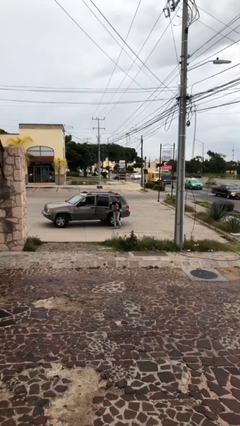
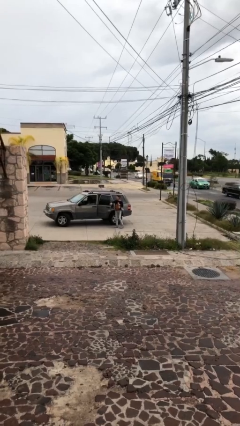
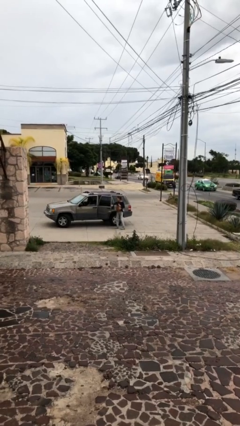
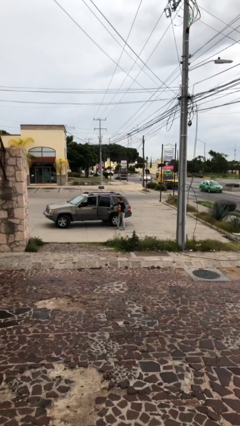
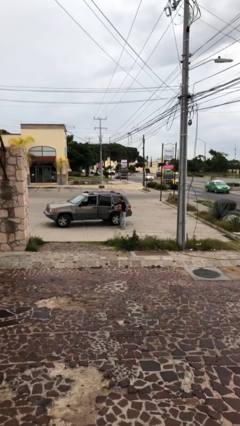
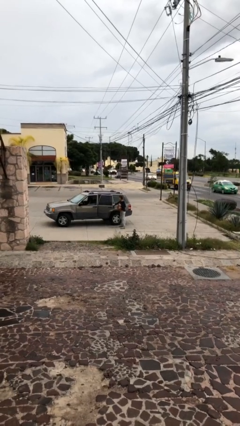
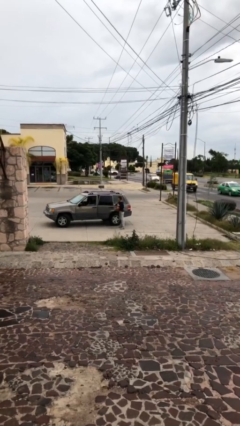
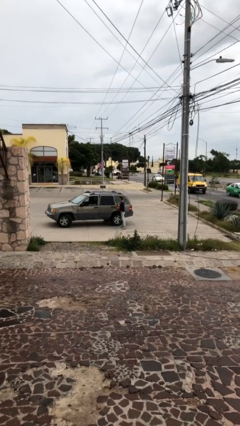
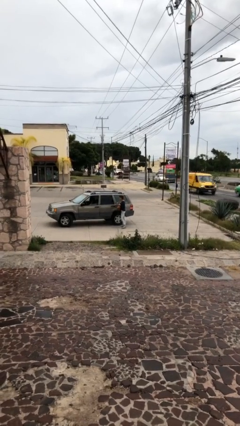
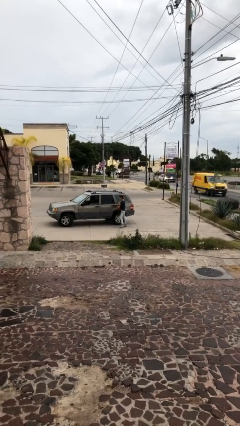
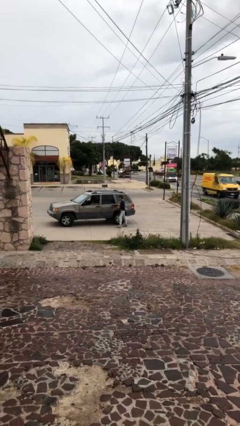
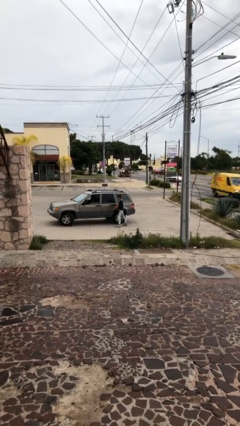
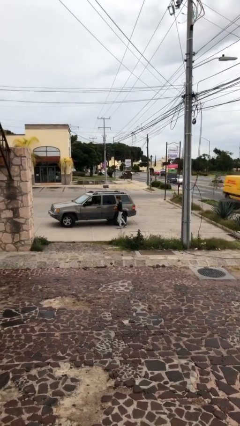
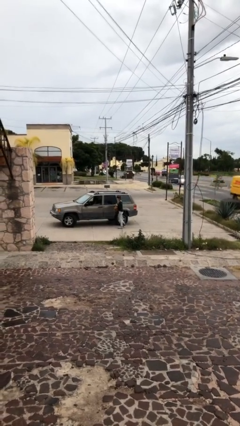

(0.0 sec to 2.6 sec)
person closes car door

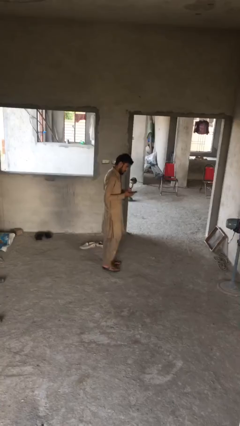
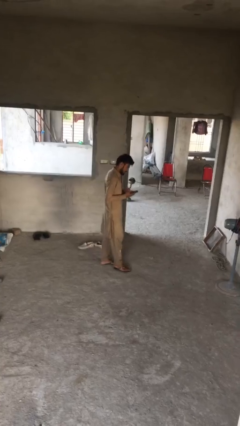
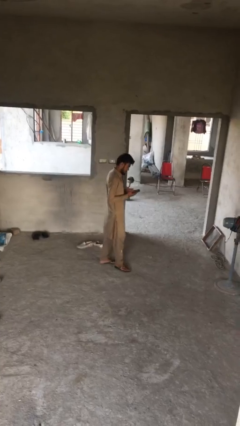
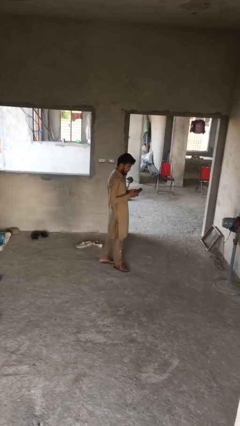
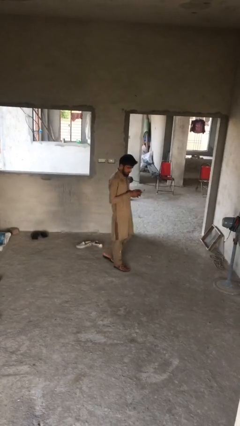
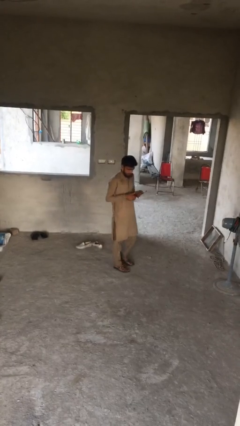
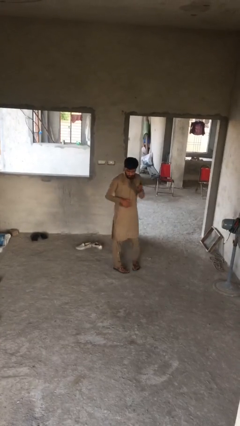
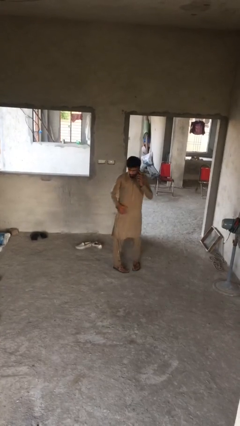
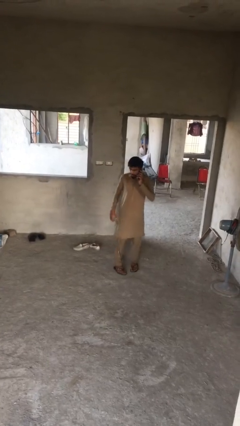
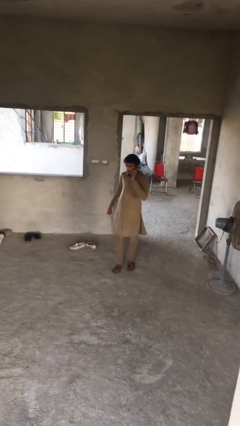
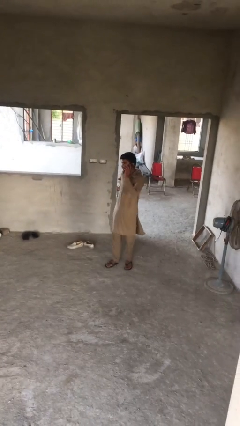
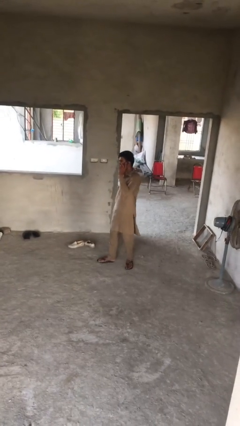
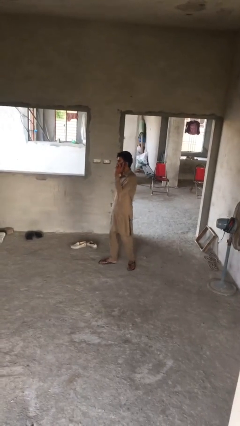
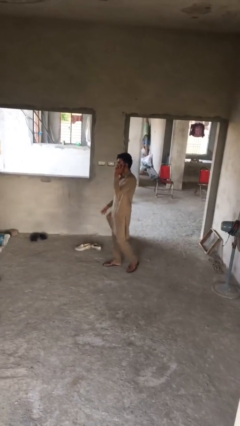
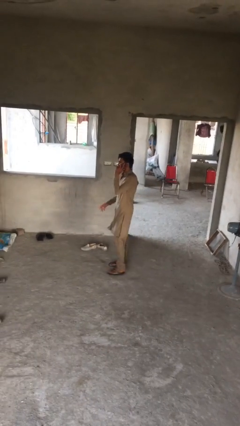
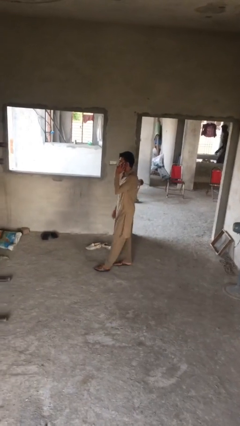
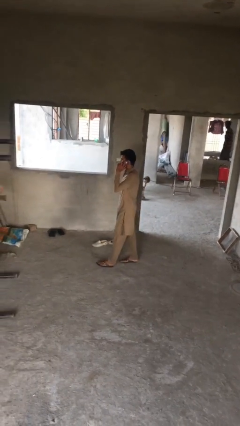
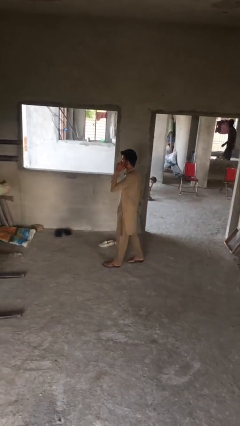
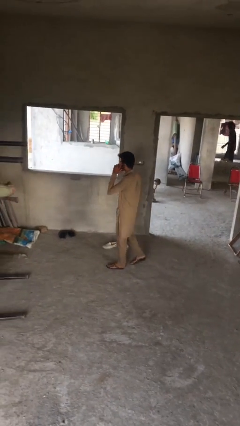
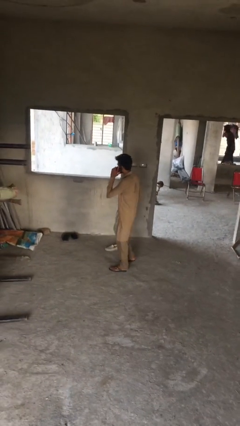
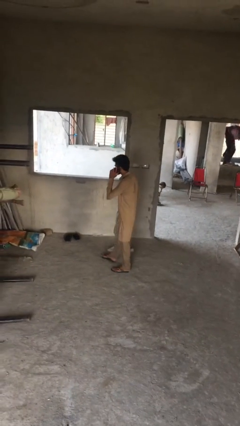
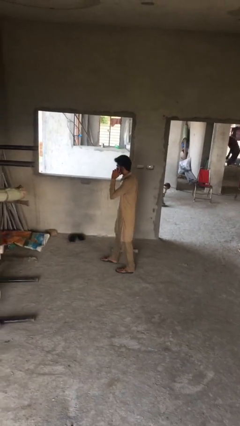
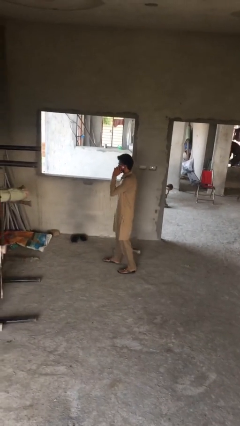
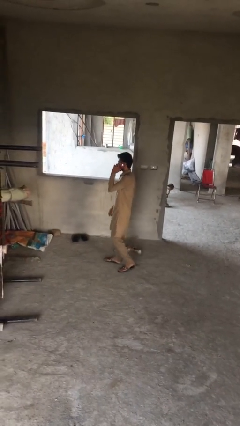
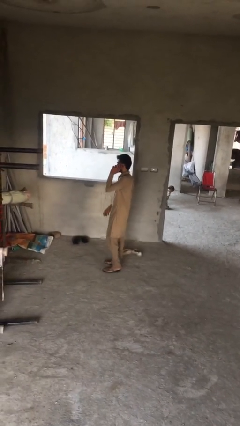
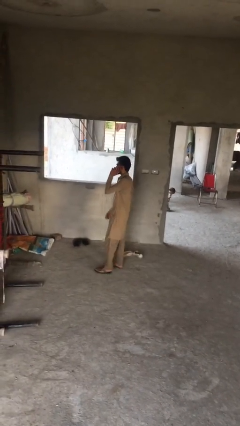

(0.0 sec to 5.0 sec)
person talks on phone

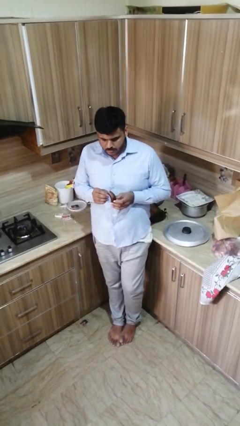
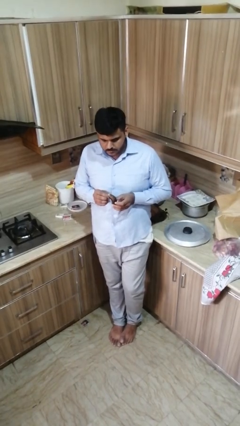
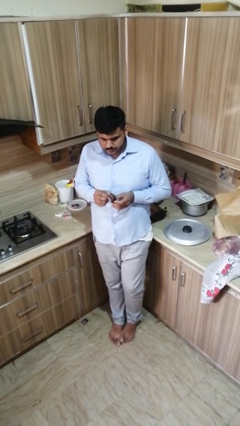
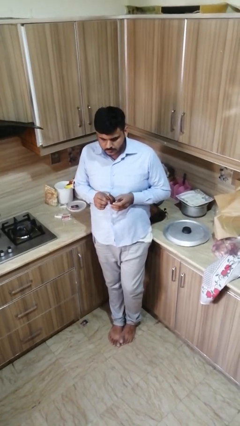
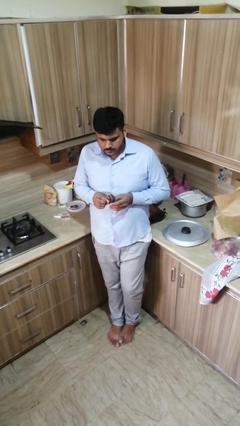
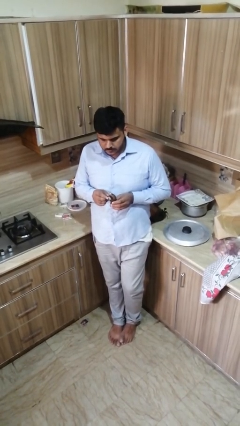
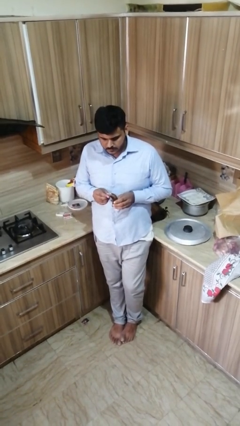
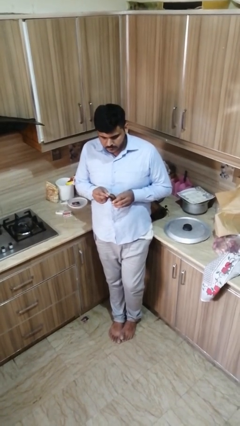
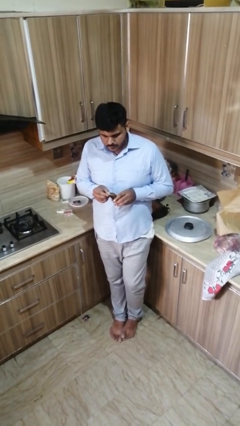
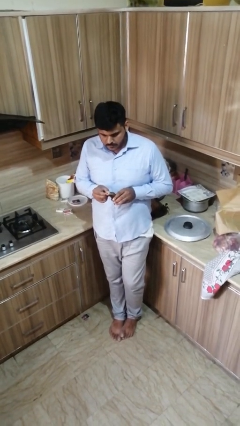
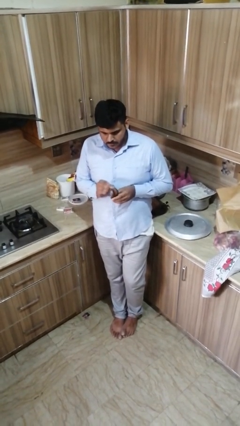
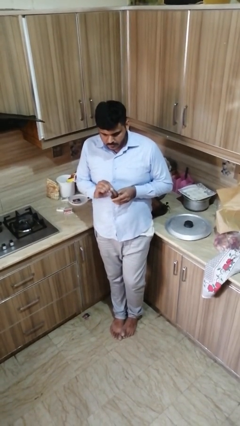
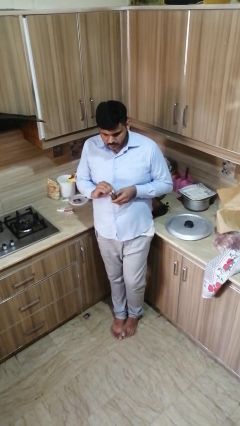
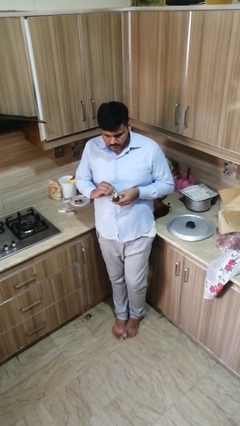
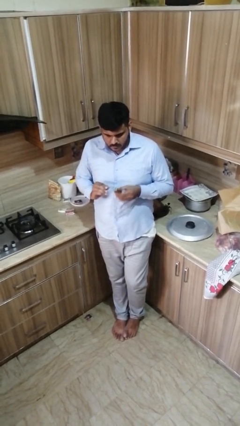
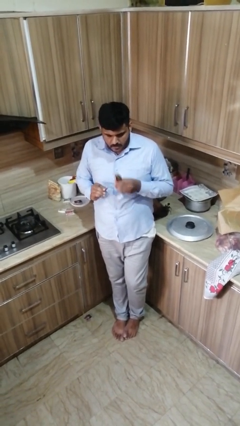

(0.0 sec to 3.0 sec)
person eats banana

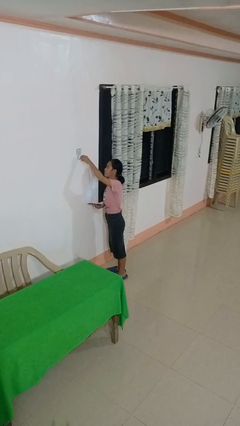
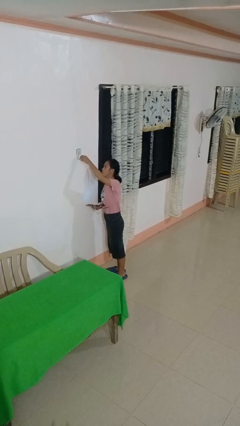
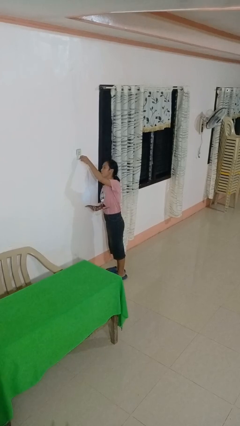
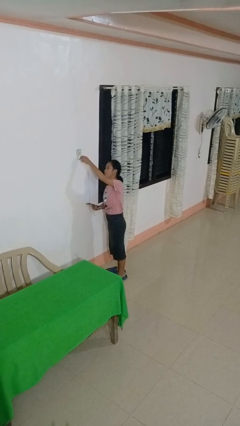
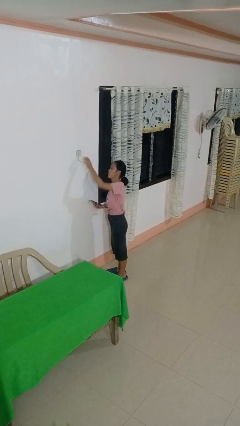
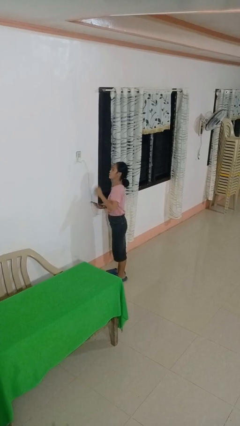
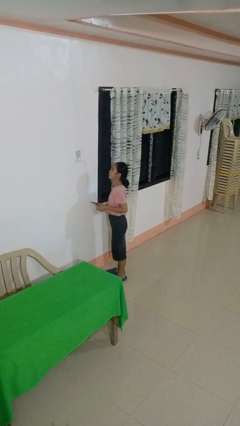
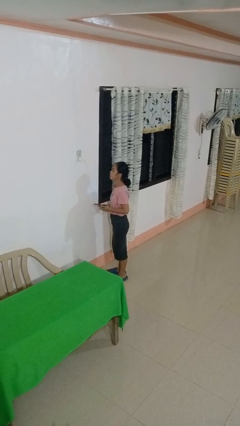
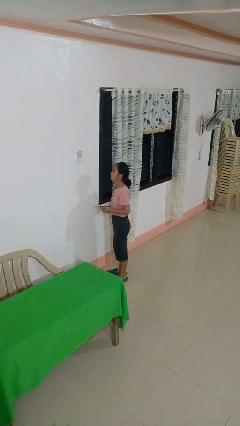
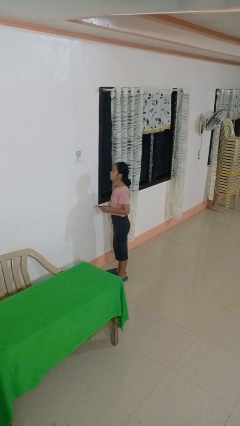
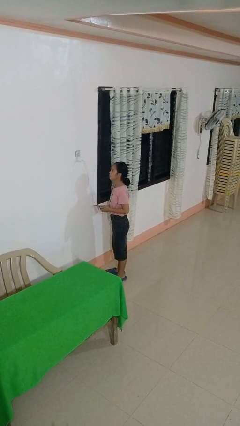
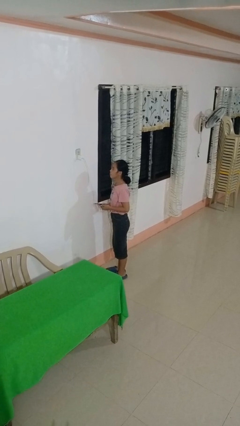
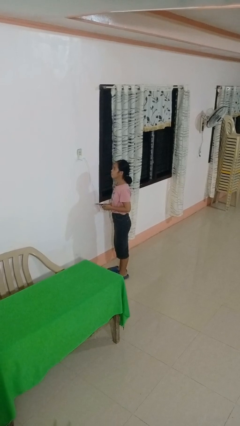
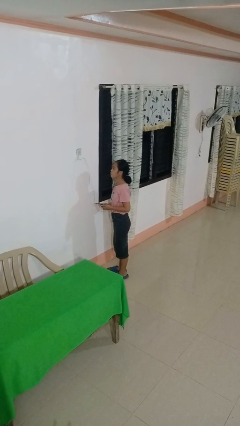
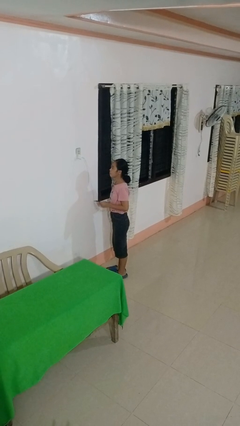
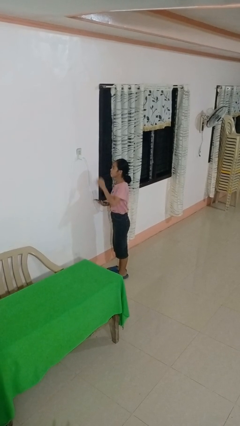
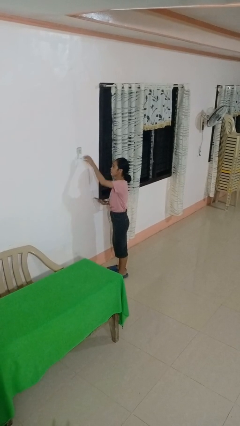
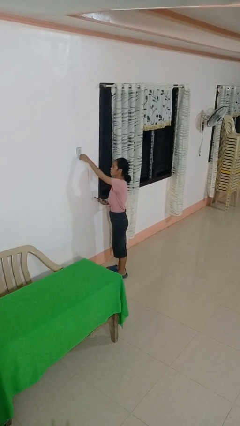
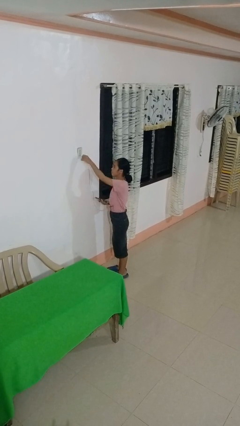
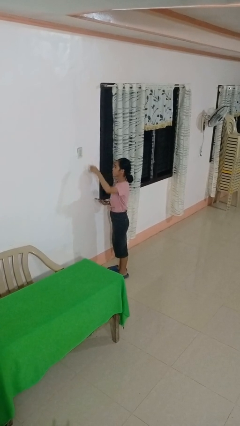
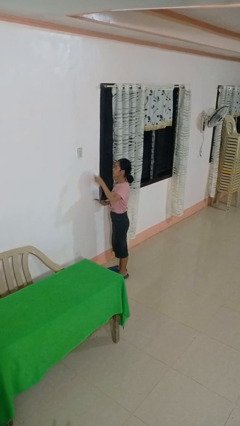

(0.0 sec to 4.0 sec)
person plugs into electrical socket

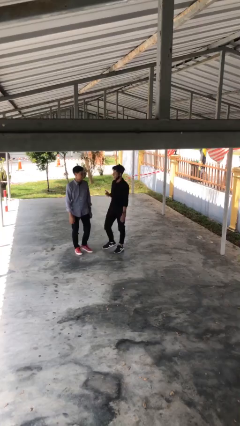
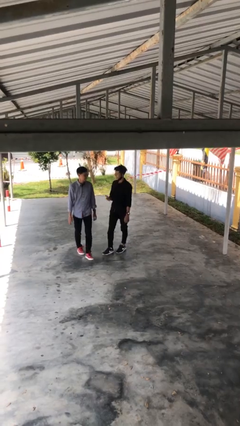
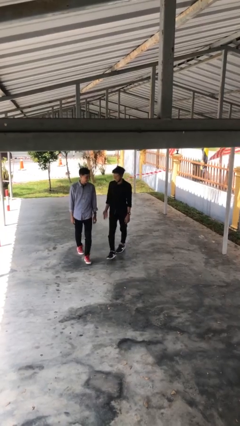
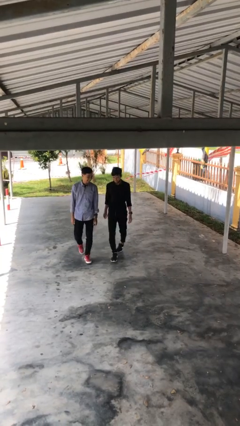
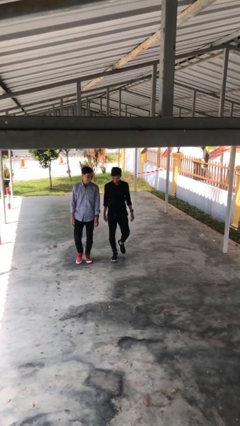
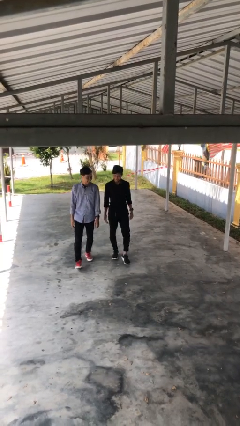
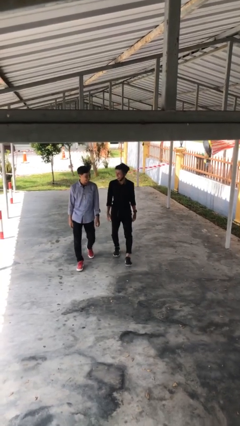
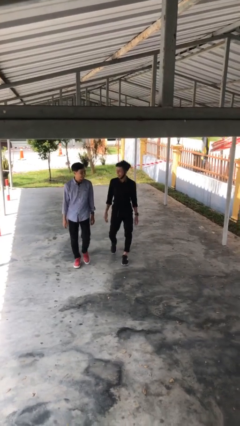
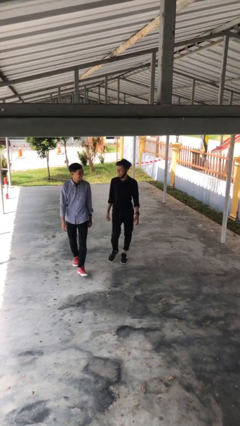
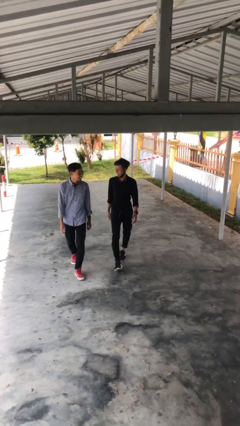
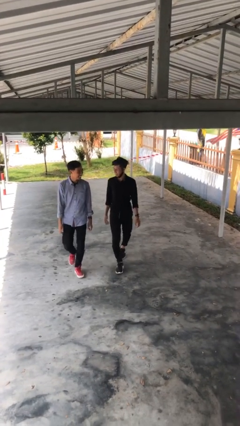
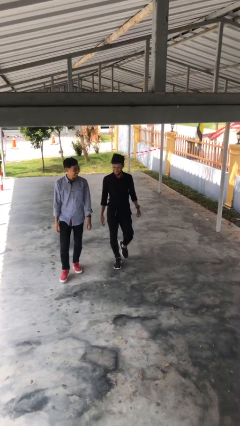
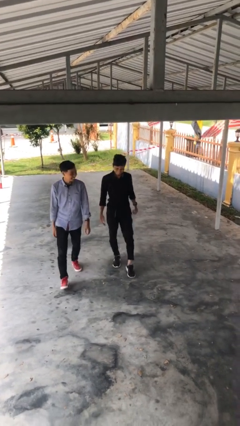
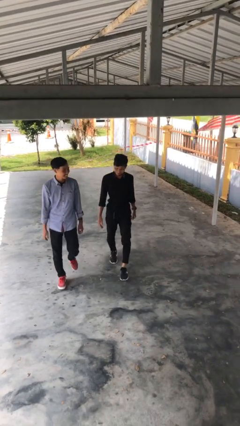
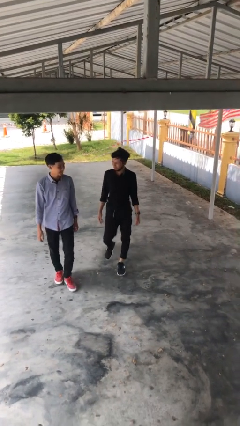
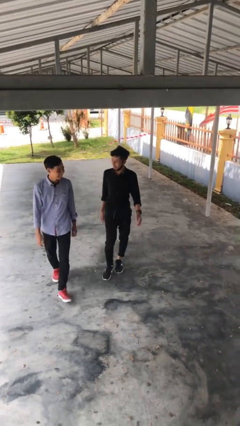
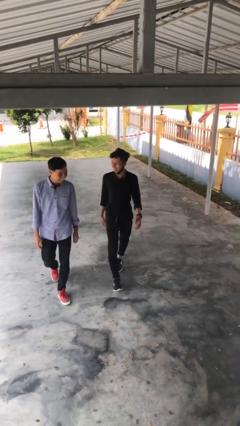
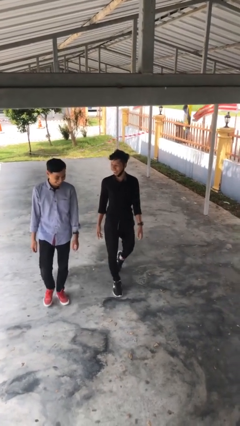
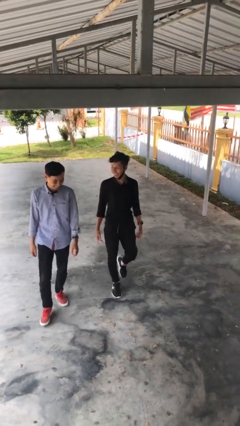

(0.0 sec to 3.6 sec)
person talks to person
